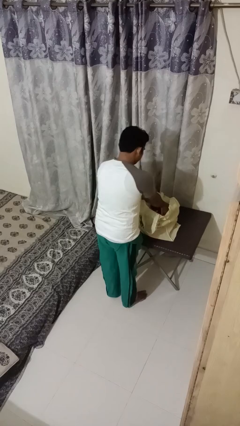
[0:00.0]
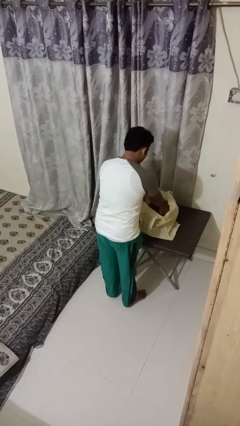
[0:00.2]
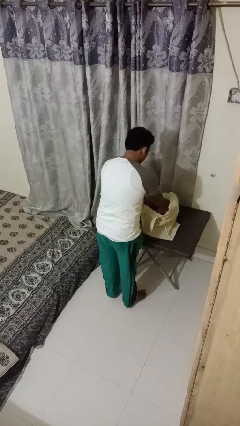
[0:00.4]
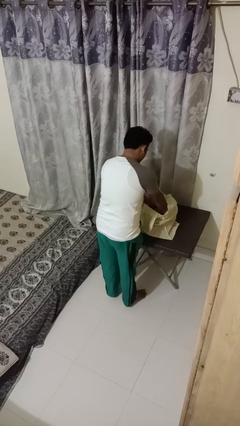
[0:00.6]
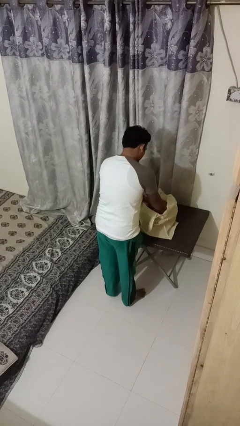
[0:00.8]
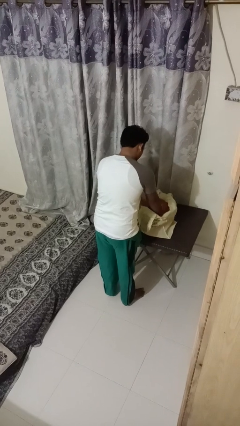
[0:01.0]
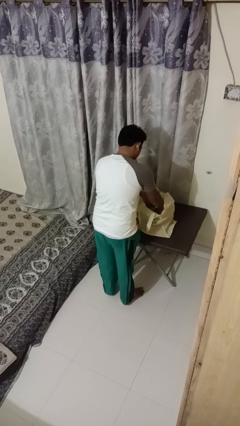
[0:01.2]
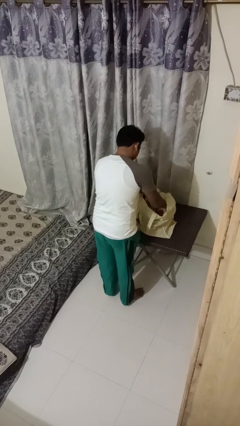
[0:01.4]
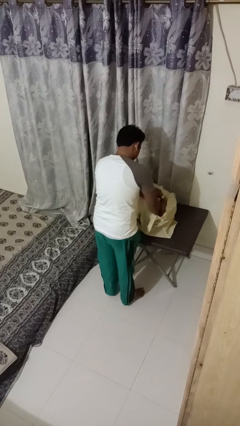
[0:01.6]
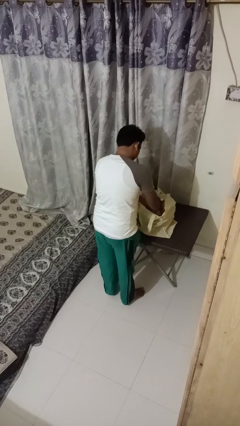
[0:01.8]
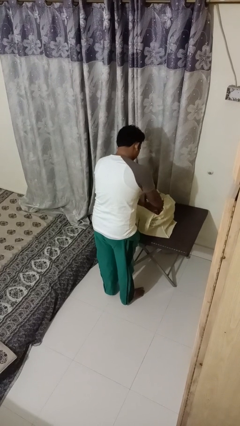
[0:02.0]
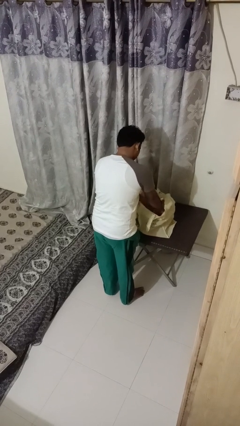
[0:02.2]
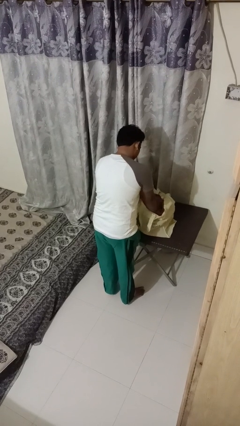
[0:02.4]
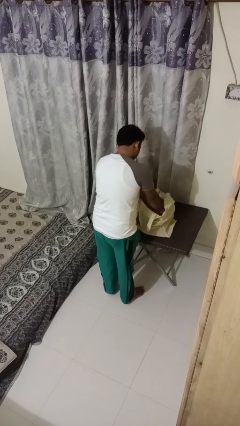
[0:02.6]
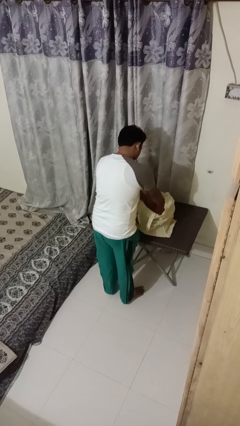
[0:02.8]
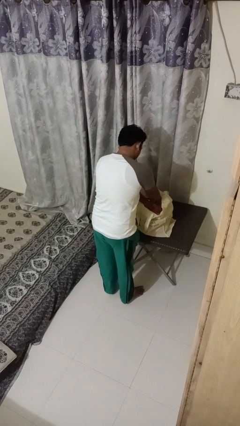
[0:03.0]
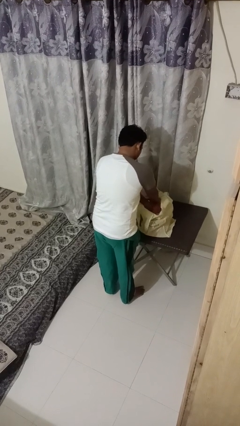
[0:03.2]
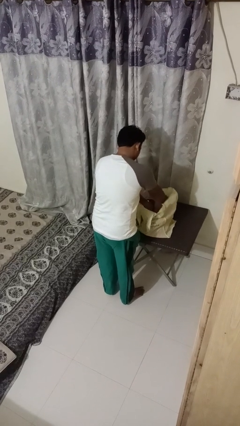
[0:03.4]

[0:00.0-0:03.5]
person searches in bag

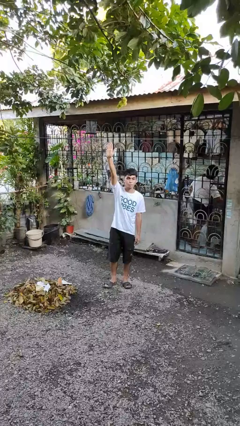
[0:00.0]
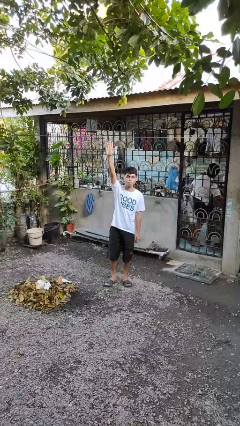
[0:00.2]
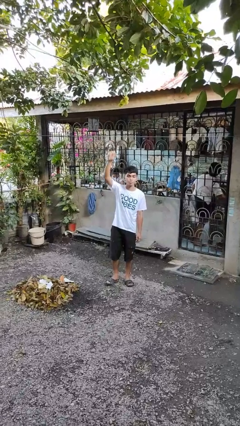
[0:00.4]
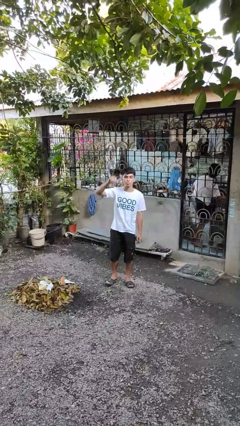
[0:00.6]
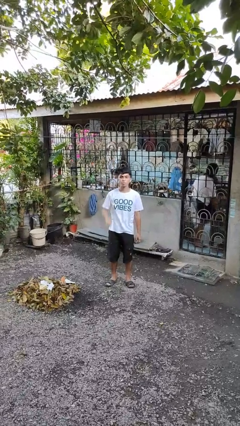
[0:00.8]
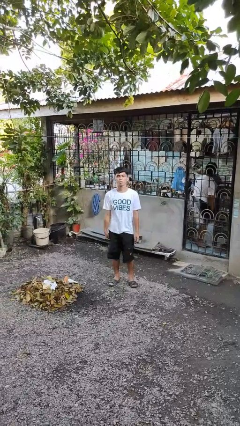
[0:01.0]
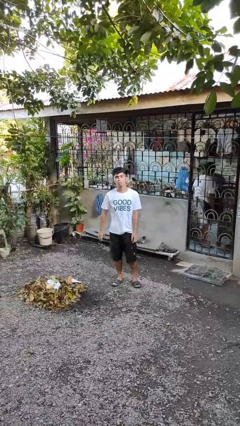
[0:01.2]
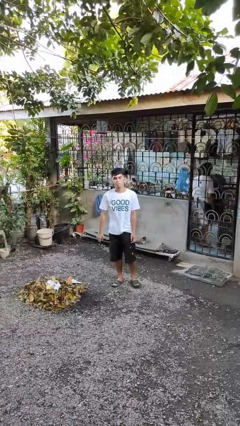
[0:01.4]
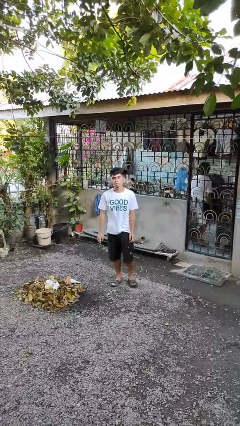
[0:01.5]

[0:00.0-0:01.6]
person gestures lower hand

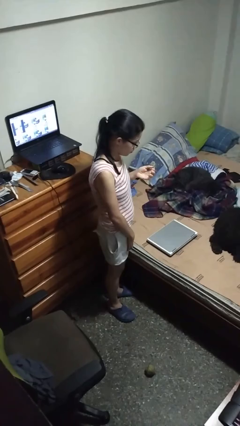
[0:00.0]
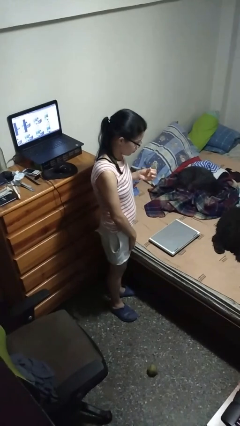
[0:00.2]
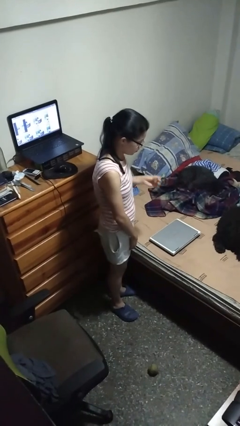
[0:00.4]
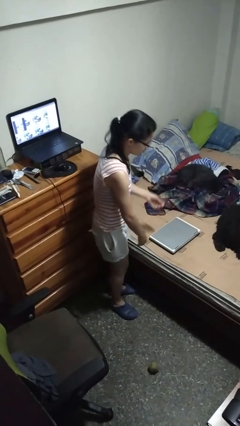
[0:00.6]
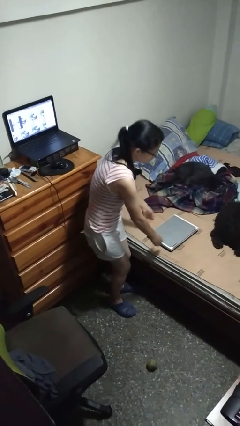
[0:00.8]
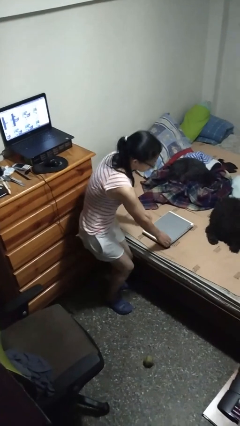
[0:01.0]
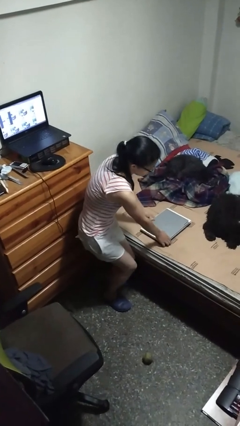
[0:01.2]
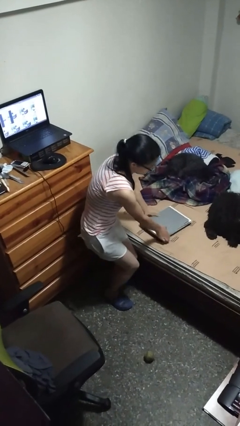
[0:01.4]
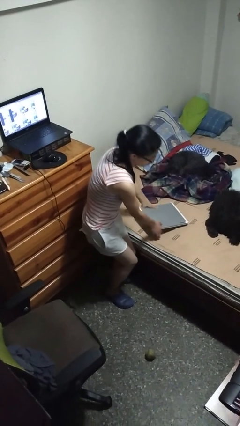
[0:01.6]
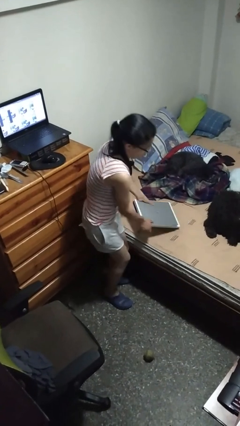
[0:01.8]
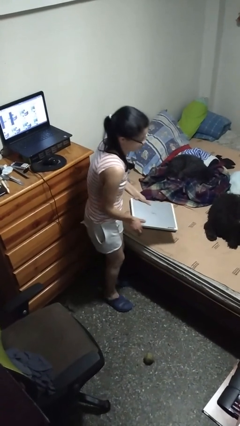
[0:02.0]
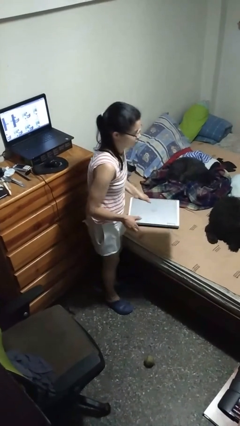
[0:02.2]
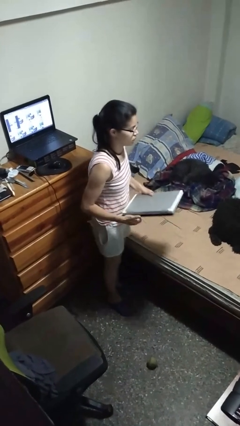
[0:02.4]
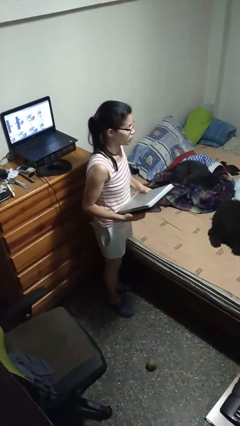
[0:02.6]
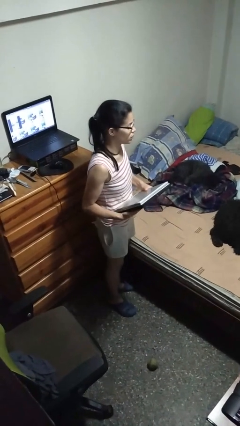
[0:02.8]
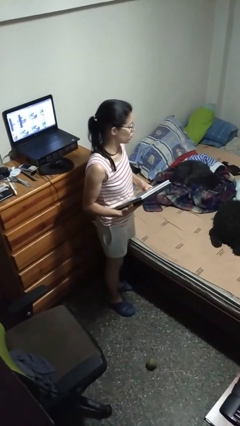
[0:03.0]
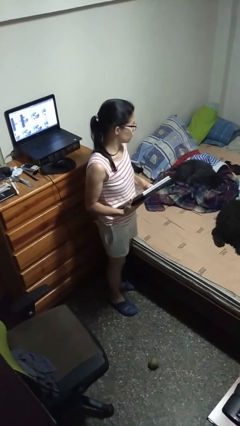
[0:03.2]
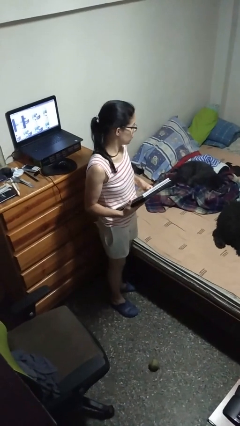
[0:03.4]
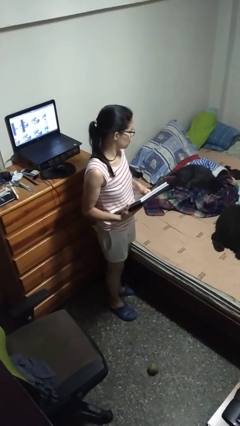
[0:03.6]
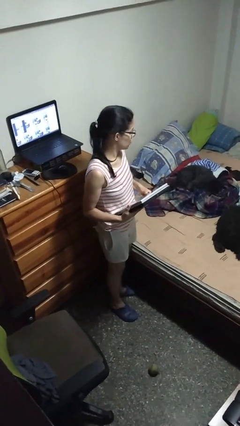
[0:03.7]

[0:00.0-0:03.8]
person picks up object from bed

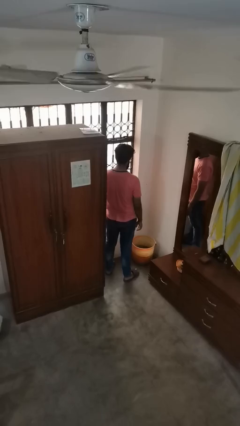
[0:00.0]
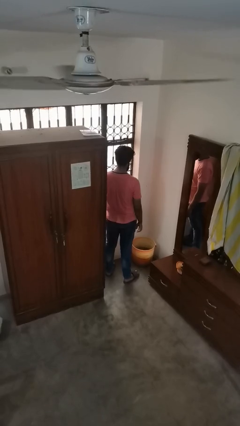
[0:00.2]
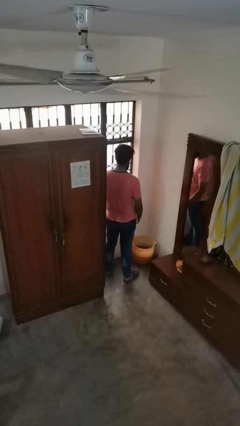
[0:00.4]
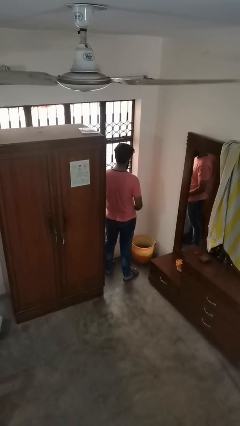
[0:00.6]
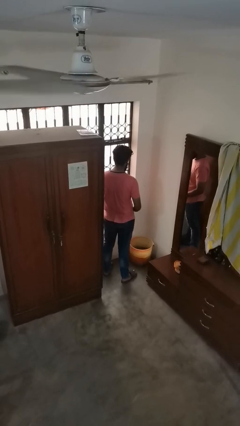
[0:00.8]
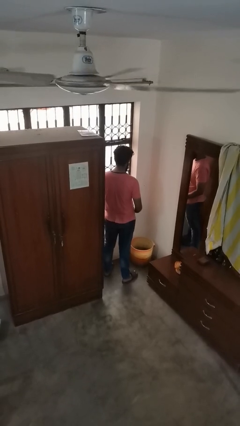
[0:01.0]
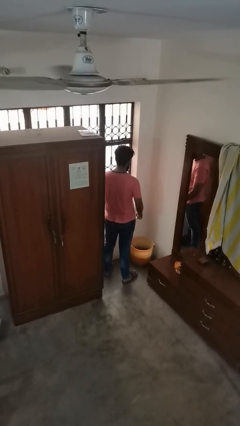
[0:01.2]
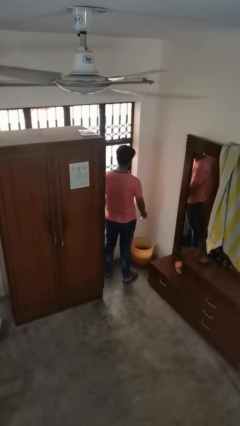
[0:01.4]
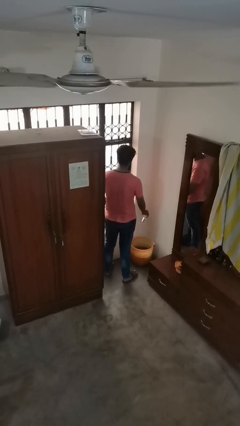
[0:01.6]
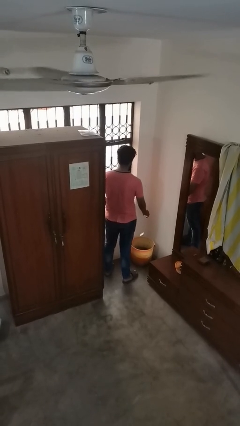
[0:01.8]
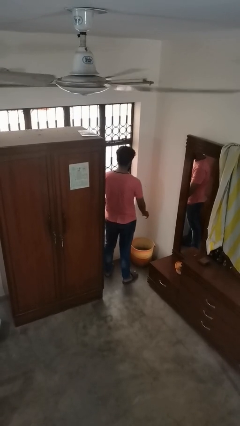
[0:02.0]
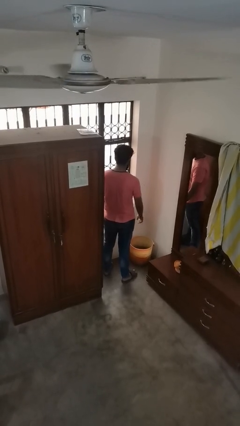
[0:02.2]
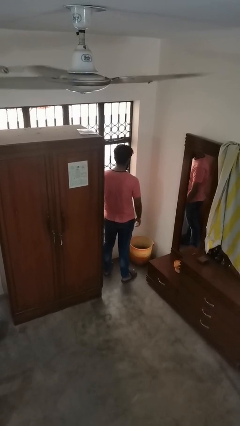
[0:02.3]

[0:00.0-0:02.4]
person discards trash

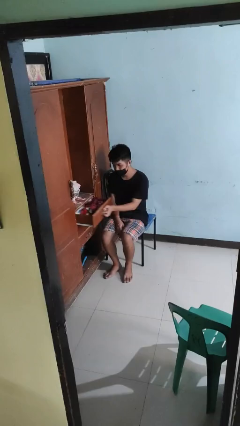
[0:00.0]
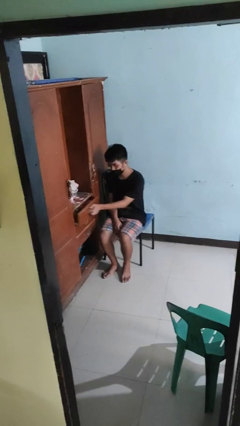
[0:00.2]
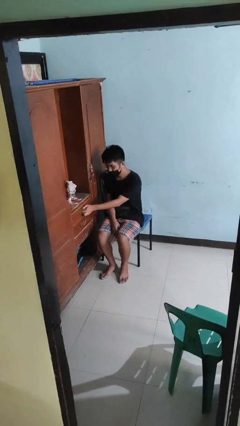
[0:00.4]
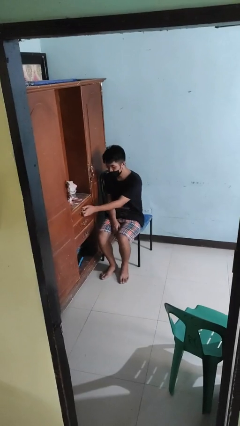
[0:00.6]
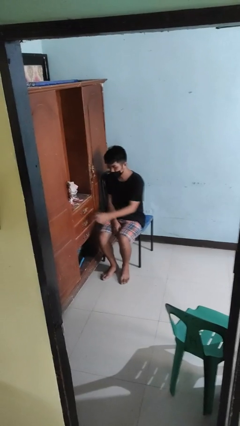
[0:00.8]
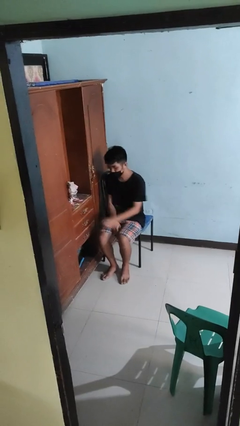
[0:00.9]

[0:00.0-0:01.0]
person closes dresser drawer

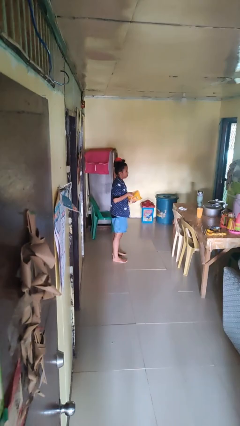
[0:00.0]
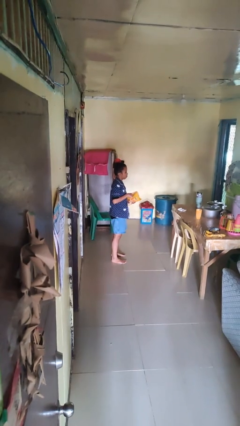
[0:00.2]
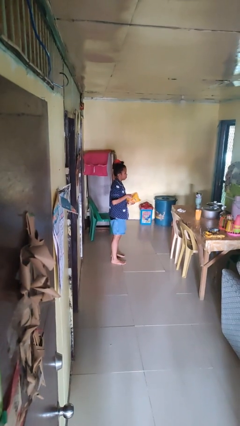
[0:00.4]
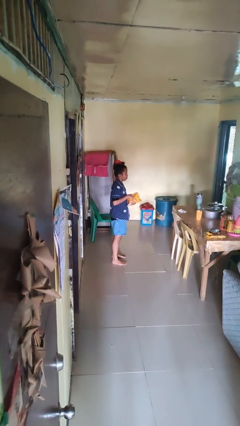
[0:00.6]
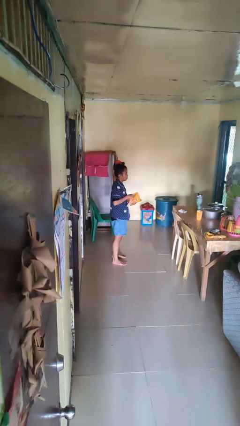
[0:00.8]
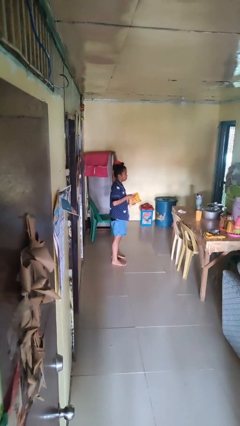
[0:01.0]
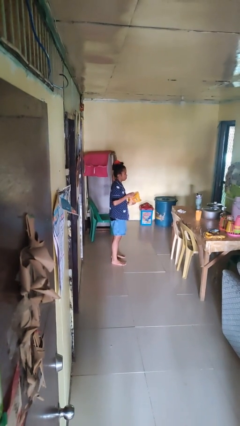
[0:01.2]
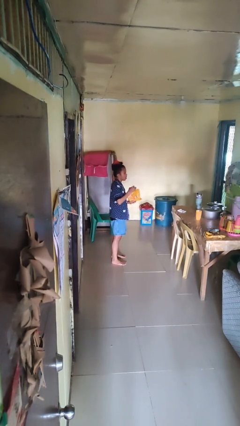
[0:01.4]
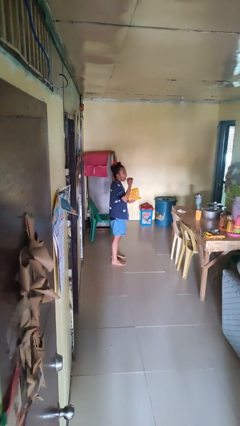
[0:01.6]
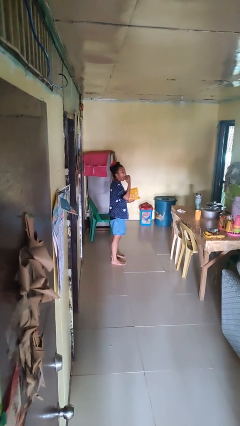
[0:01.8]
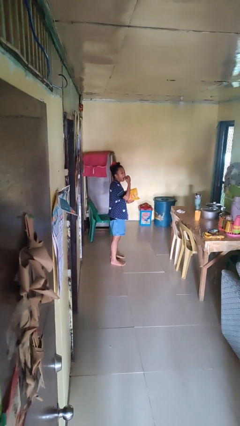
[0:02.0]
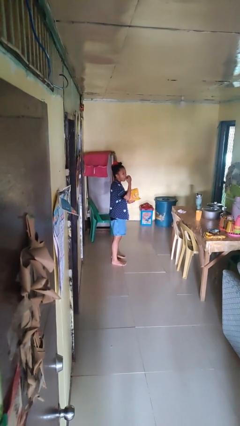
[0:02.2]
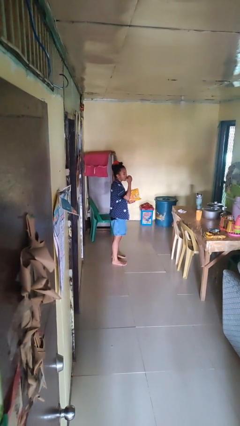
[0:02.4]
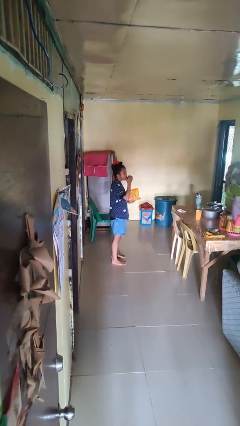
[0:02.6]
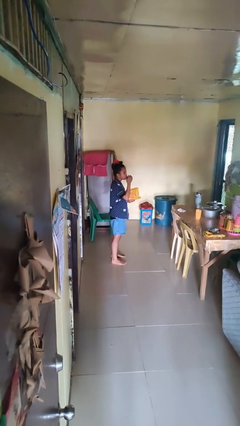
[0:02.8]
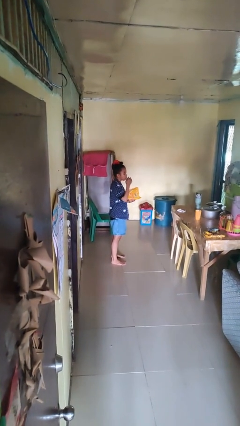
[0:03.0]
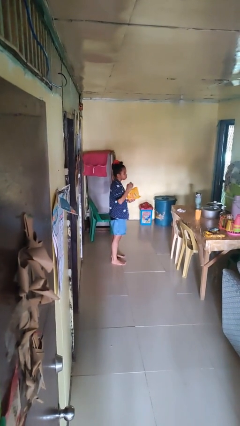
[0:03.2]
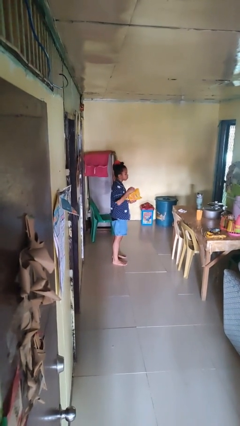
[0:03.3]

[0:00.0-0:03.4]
person eats snack from bag

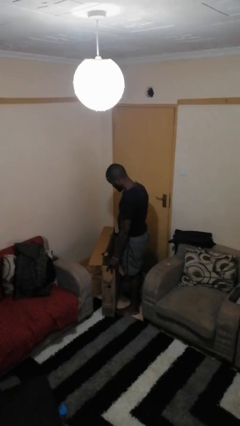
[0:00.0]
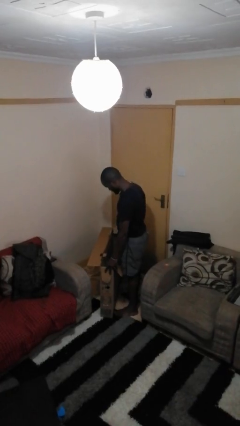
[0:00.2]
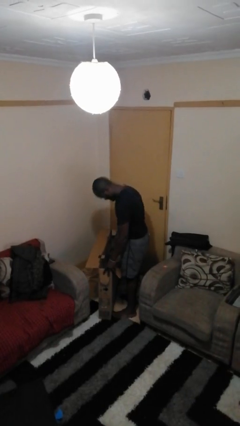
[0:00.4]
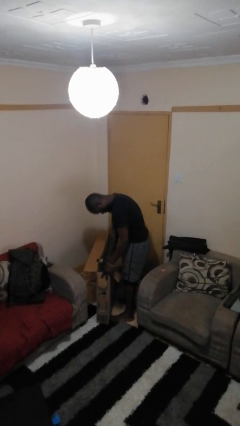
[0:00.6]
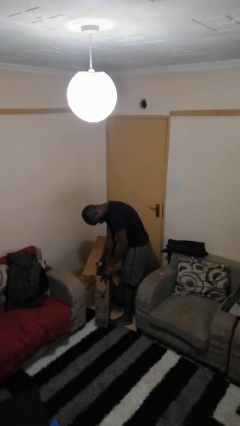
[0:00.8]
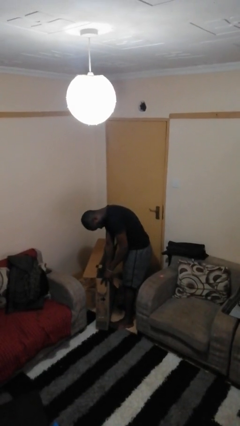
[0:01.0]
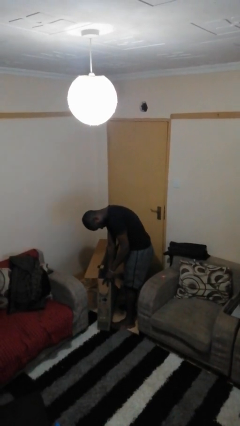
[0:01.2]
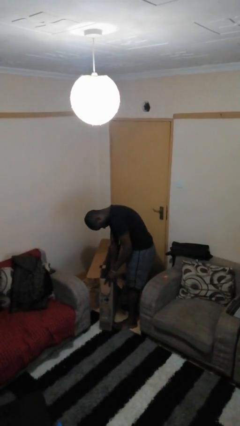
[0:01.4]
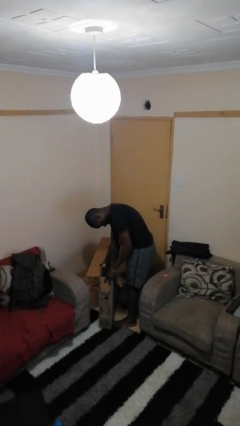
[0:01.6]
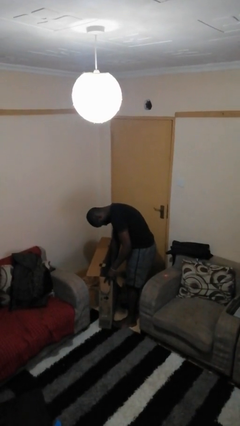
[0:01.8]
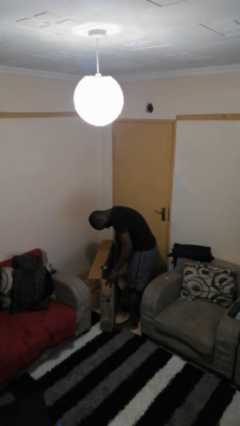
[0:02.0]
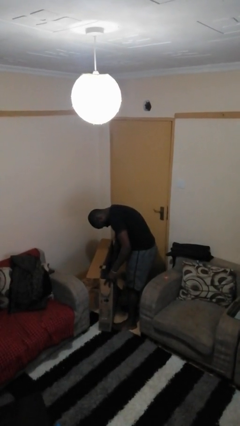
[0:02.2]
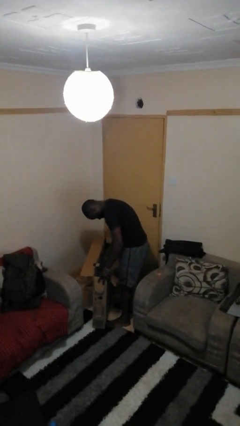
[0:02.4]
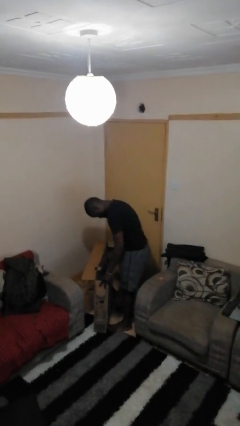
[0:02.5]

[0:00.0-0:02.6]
person searches in box
